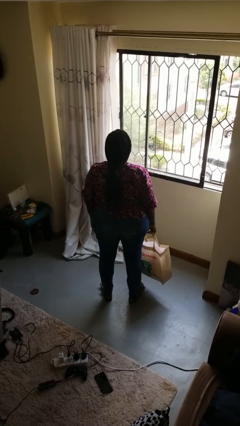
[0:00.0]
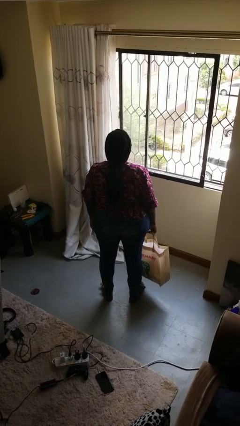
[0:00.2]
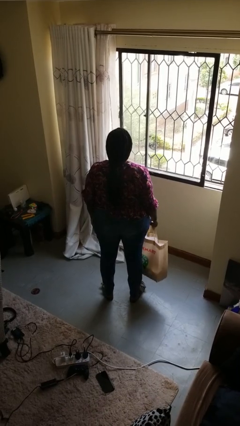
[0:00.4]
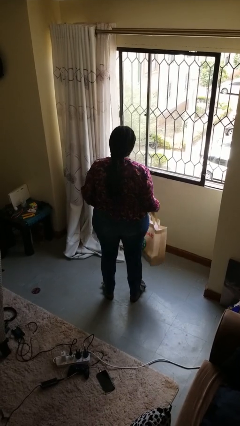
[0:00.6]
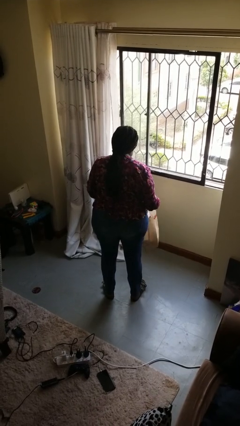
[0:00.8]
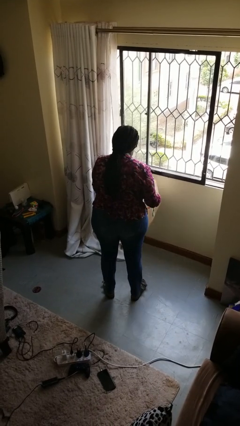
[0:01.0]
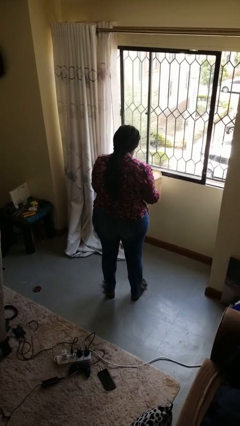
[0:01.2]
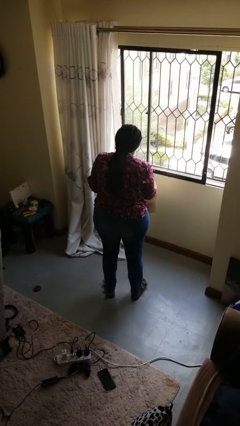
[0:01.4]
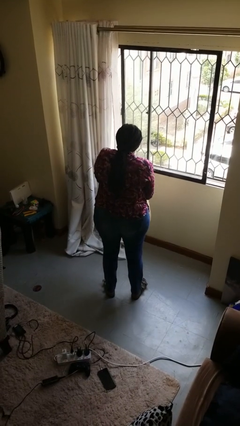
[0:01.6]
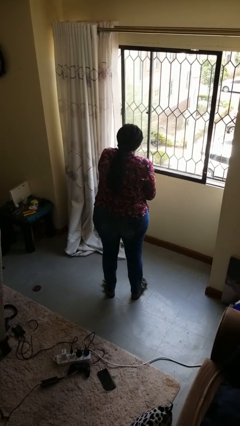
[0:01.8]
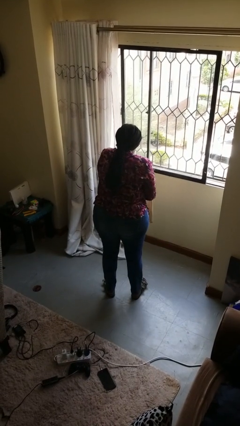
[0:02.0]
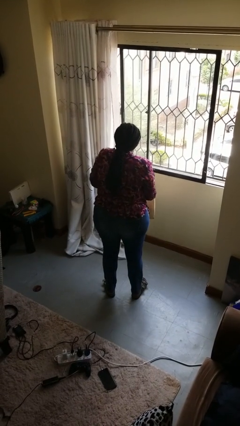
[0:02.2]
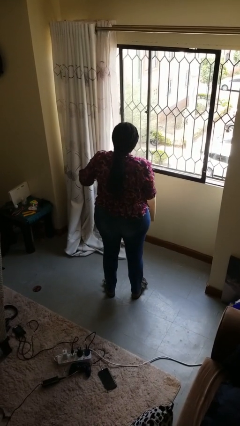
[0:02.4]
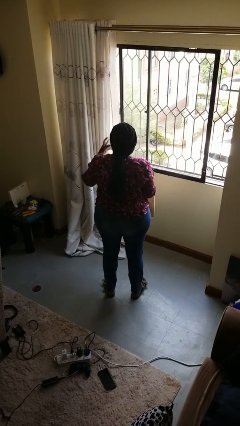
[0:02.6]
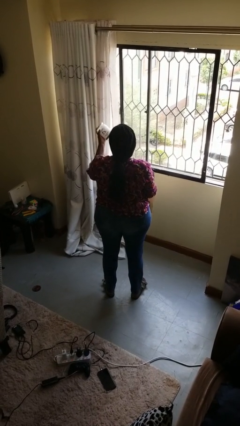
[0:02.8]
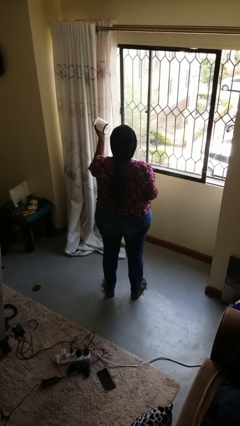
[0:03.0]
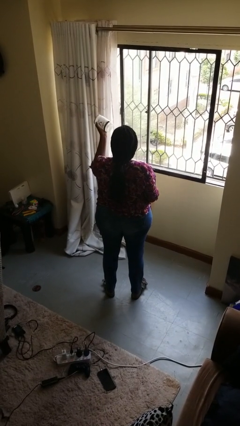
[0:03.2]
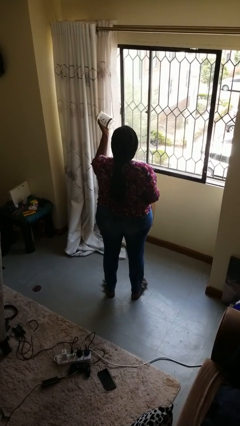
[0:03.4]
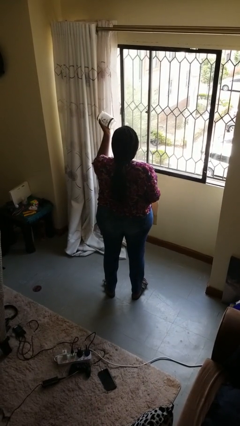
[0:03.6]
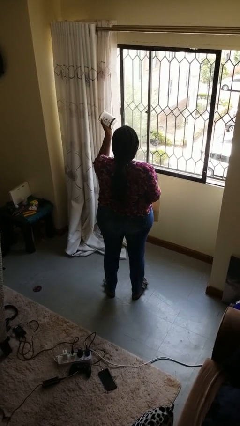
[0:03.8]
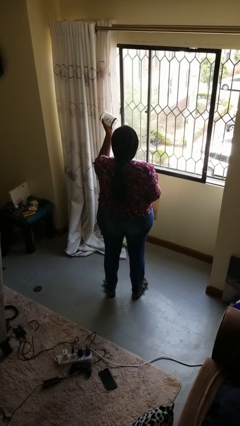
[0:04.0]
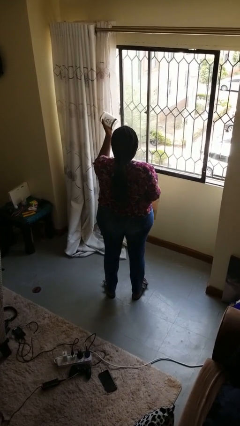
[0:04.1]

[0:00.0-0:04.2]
person takes object from bag

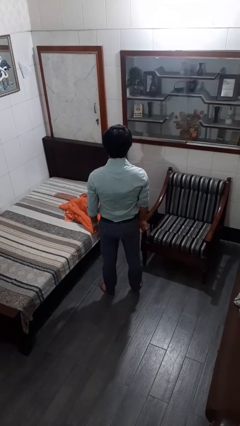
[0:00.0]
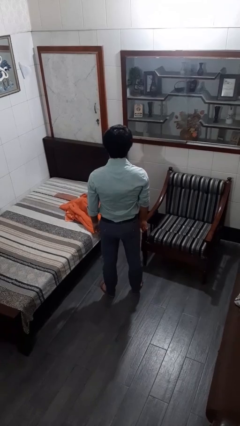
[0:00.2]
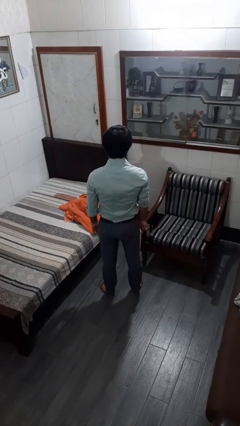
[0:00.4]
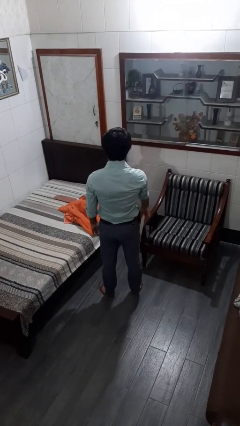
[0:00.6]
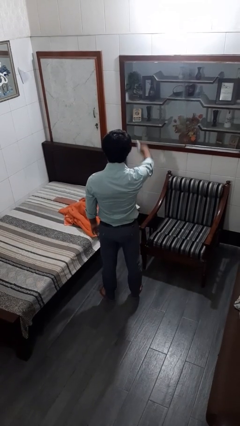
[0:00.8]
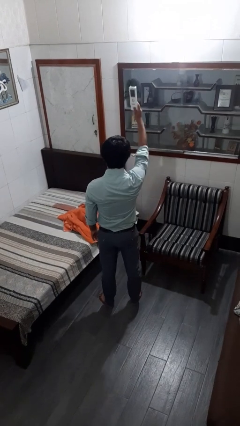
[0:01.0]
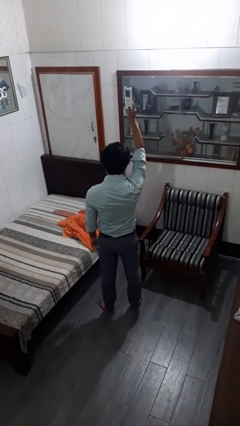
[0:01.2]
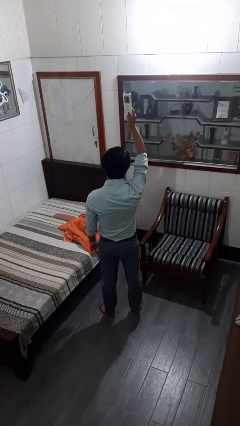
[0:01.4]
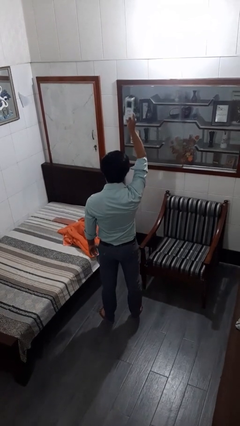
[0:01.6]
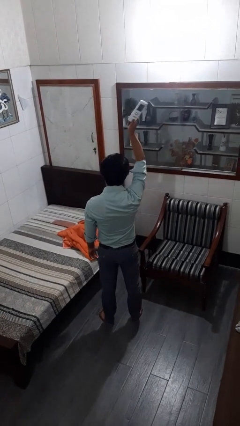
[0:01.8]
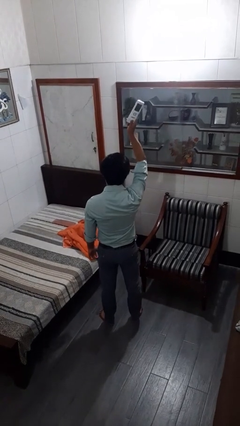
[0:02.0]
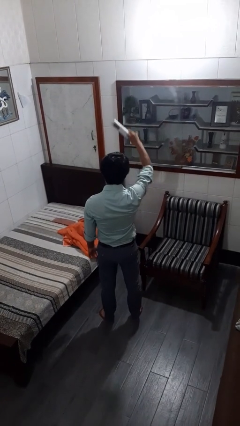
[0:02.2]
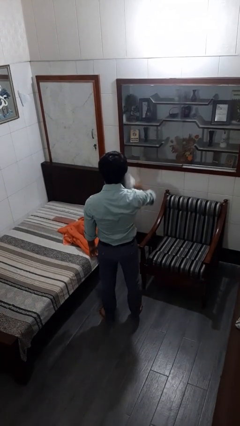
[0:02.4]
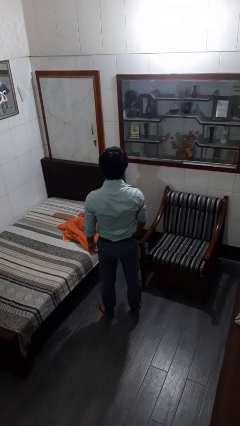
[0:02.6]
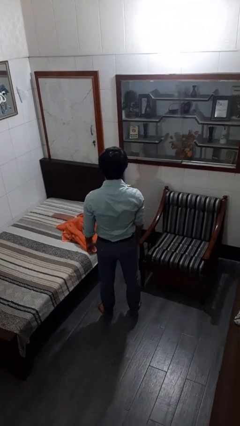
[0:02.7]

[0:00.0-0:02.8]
person holds object above head

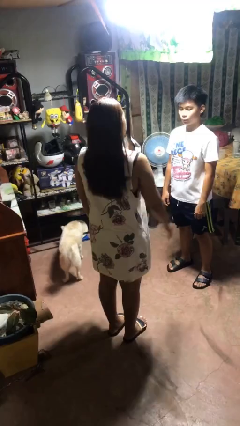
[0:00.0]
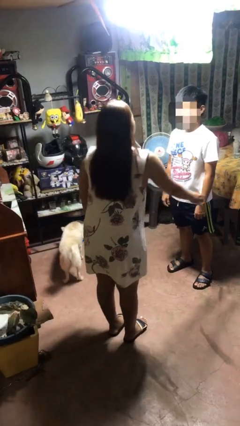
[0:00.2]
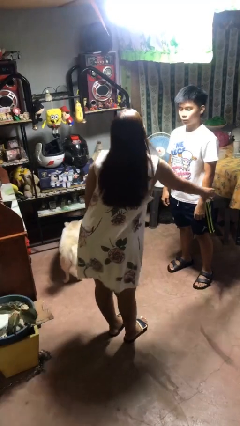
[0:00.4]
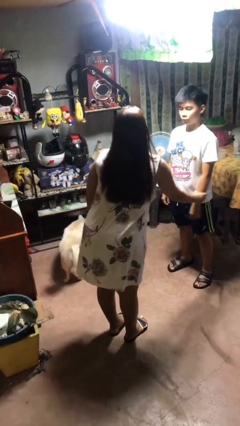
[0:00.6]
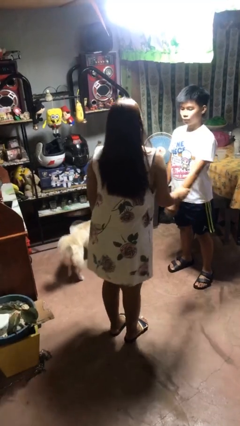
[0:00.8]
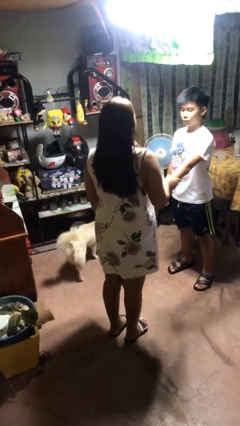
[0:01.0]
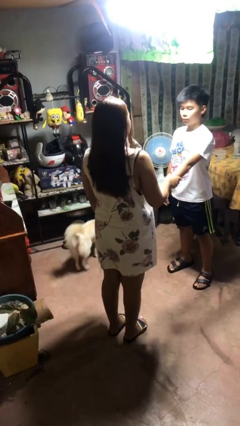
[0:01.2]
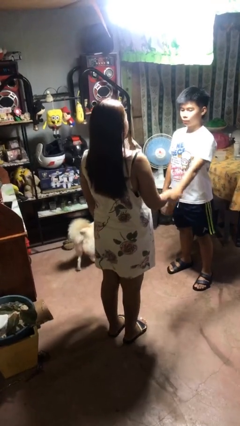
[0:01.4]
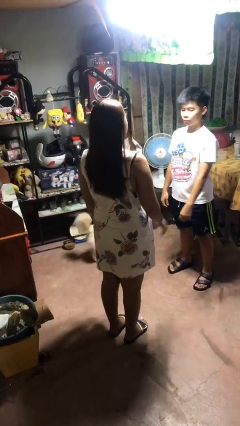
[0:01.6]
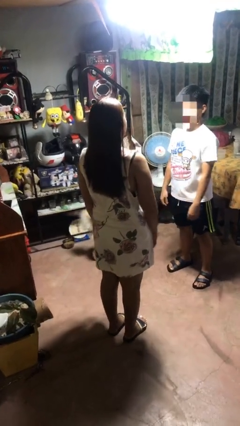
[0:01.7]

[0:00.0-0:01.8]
person grabs person by forearm

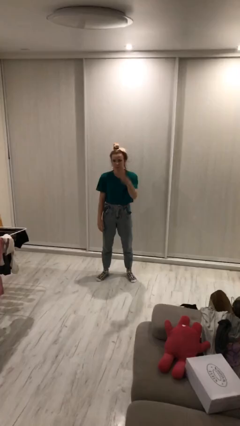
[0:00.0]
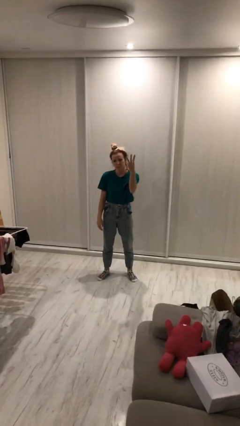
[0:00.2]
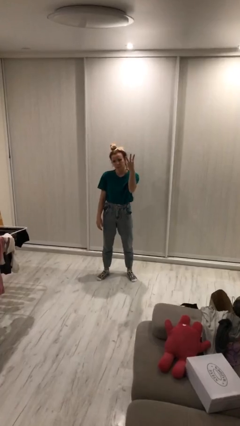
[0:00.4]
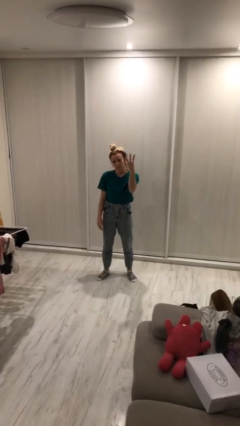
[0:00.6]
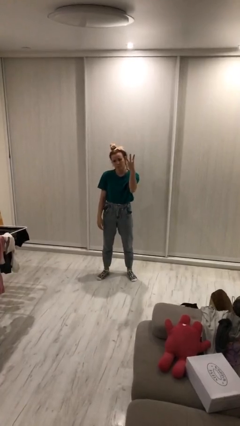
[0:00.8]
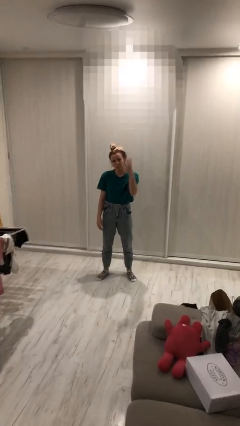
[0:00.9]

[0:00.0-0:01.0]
person gestures number three

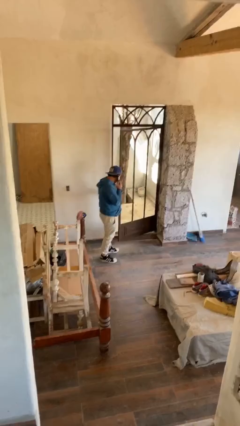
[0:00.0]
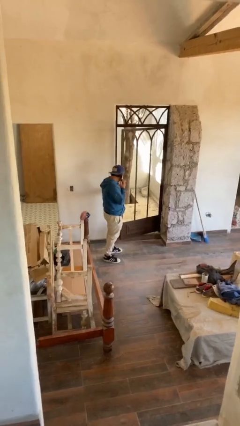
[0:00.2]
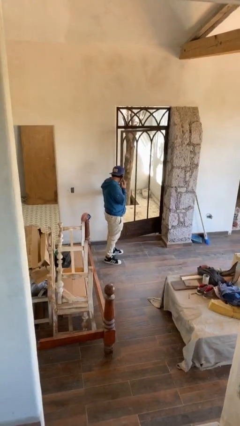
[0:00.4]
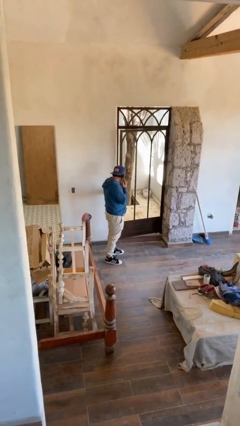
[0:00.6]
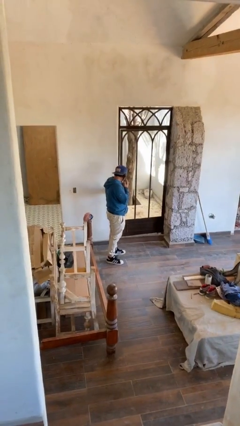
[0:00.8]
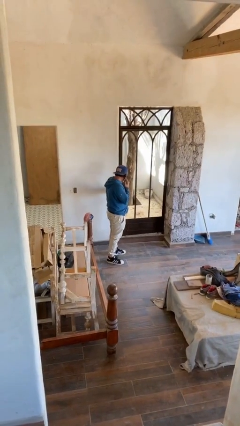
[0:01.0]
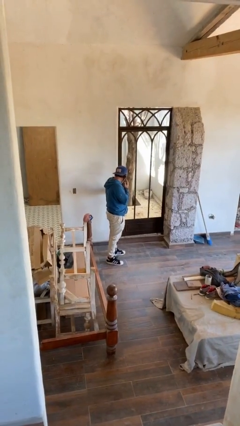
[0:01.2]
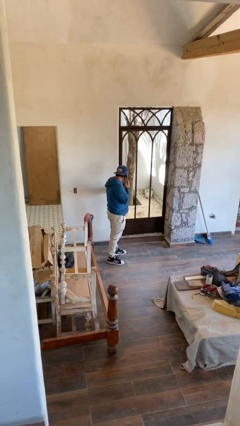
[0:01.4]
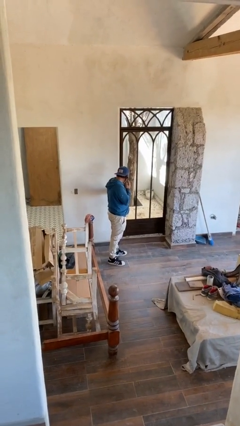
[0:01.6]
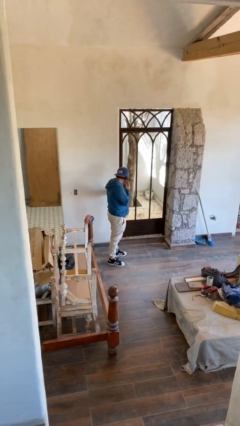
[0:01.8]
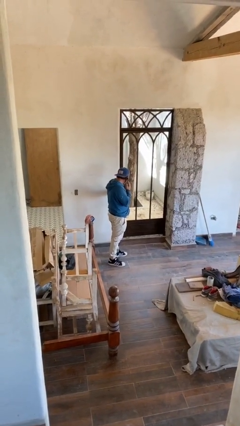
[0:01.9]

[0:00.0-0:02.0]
person closes facility door

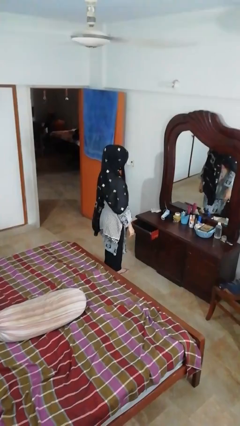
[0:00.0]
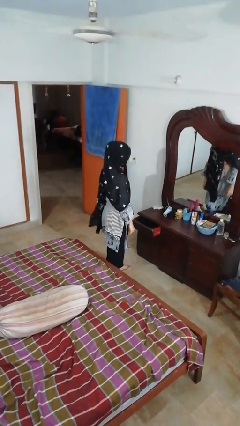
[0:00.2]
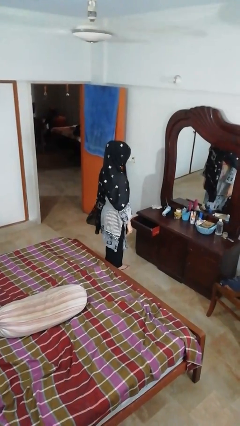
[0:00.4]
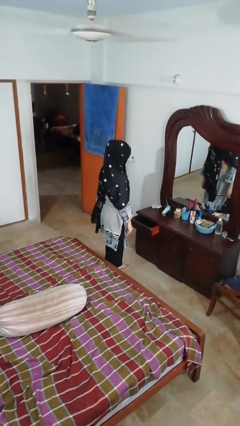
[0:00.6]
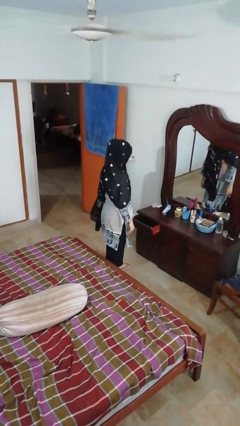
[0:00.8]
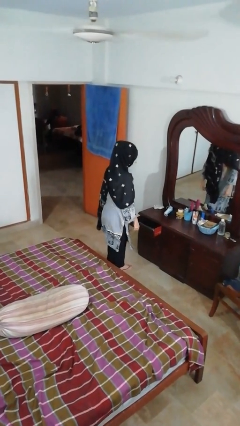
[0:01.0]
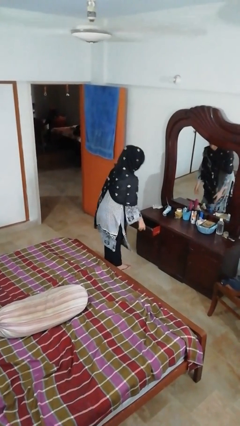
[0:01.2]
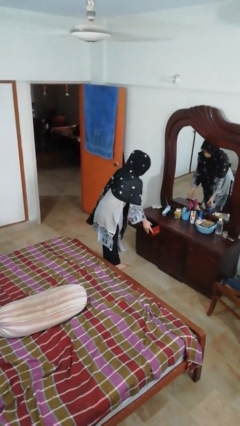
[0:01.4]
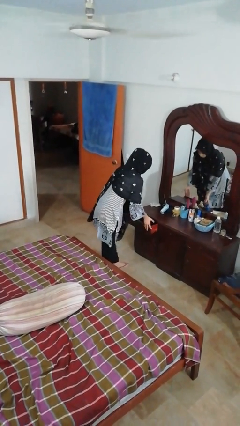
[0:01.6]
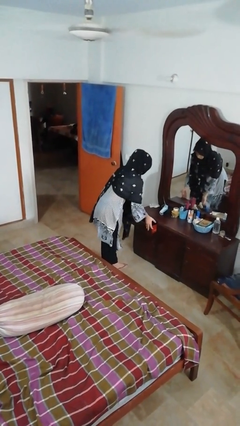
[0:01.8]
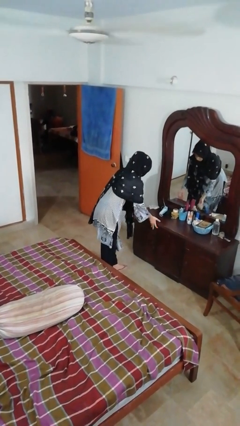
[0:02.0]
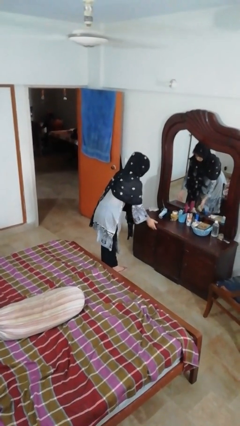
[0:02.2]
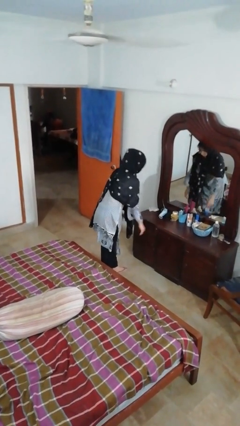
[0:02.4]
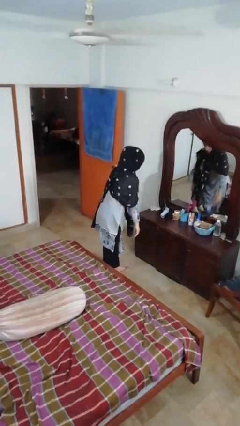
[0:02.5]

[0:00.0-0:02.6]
person closes dresser drawer

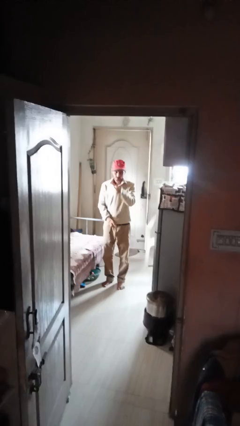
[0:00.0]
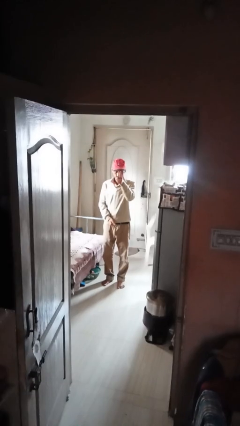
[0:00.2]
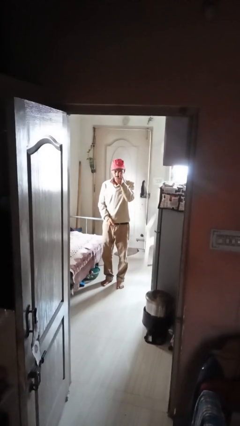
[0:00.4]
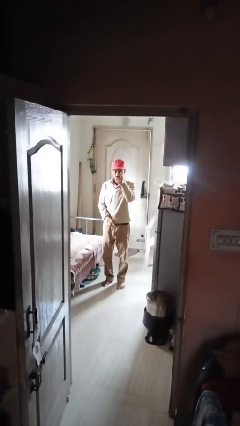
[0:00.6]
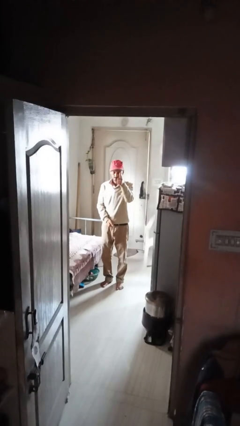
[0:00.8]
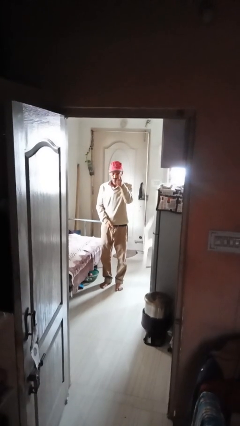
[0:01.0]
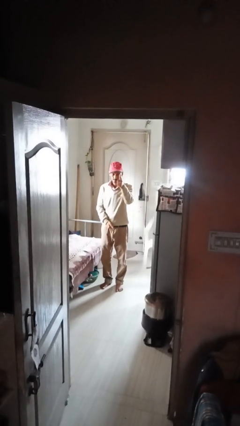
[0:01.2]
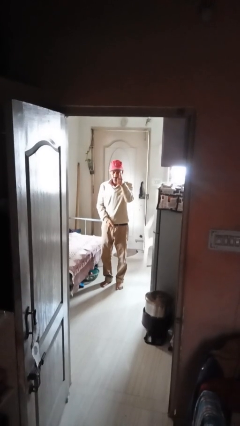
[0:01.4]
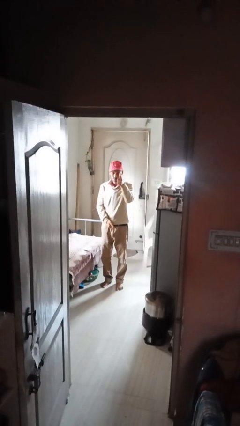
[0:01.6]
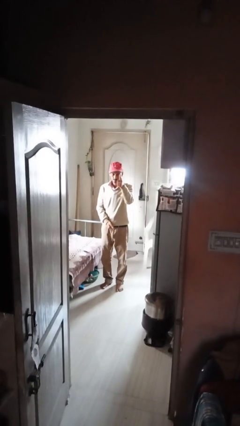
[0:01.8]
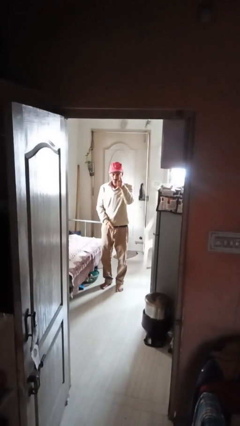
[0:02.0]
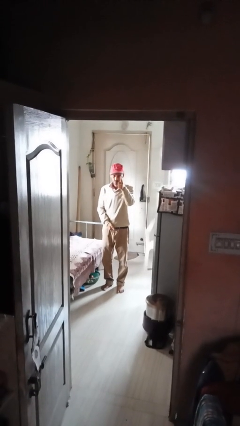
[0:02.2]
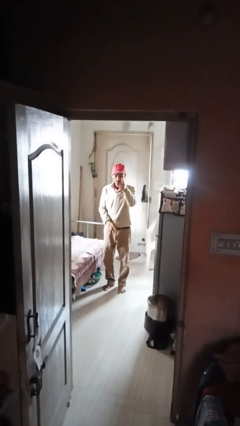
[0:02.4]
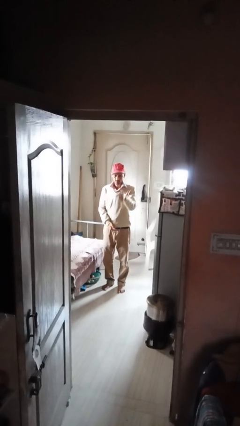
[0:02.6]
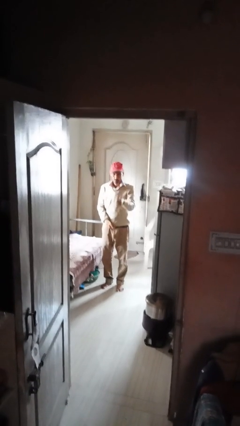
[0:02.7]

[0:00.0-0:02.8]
person gestures thumbs up

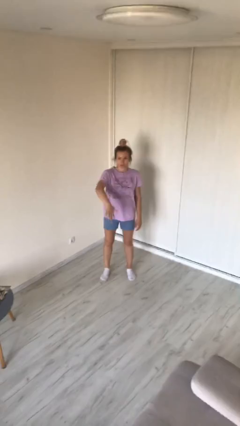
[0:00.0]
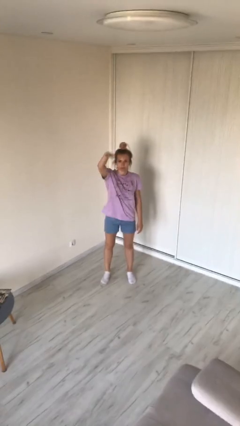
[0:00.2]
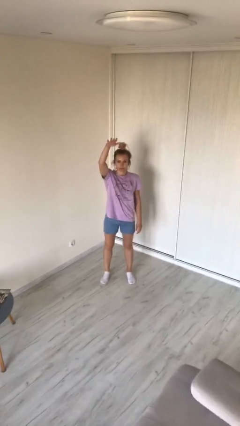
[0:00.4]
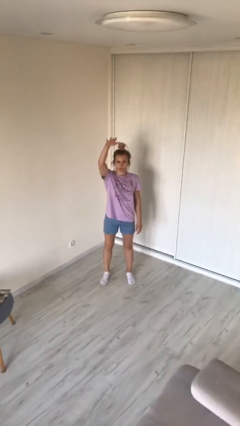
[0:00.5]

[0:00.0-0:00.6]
person gestures swipe up
